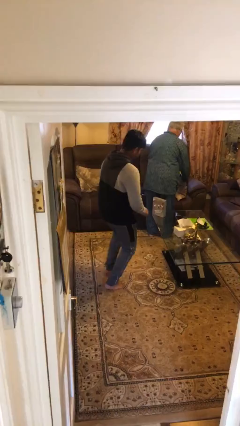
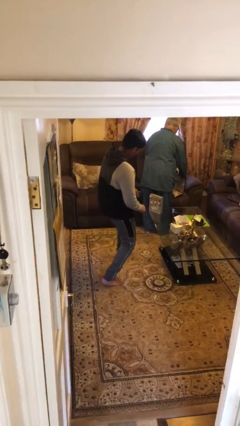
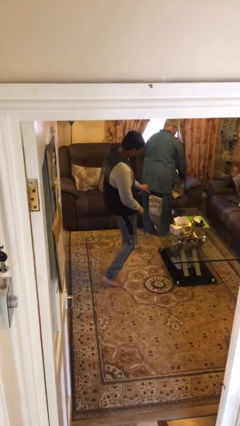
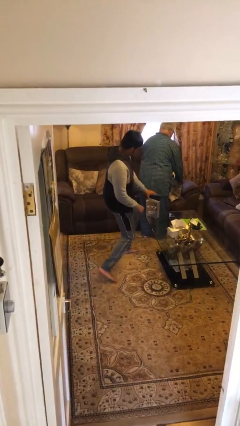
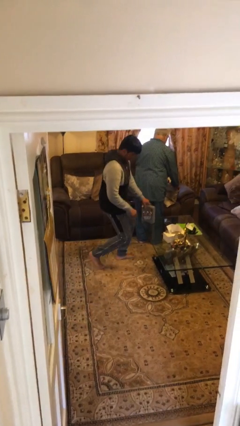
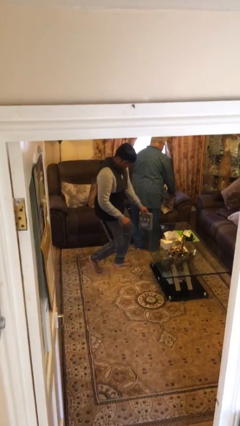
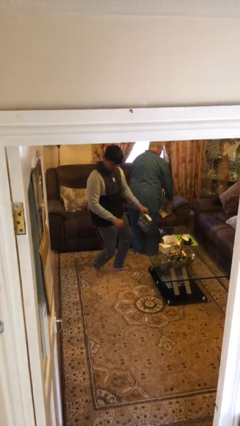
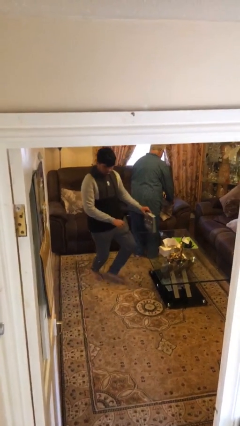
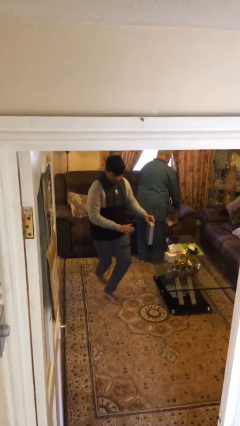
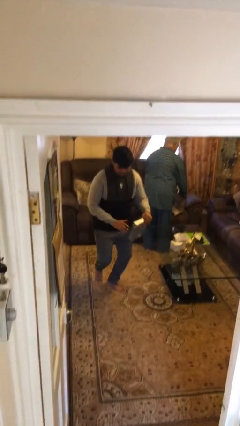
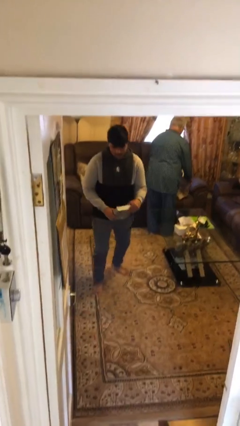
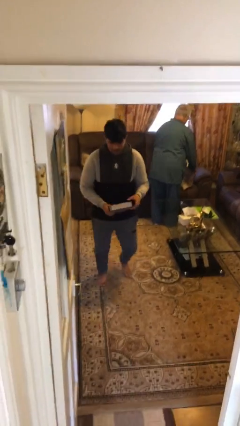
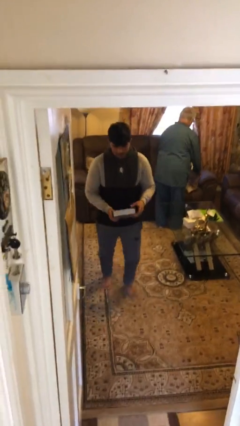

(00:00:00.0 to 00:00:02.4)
person steals object from person

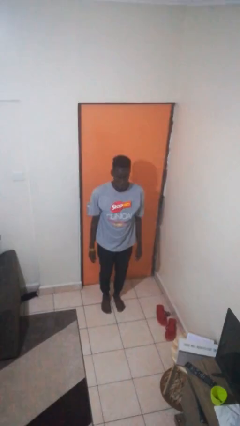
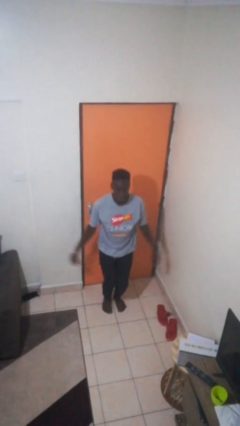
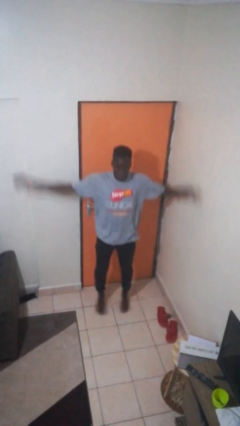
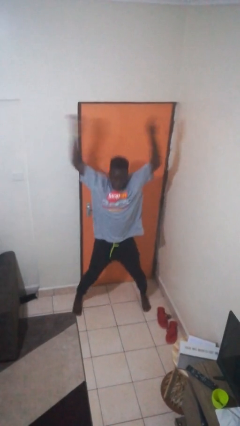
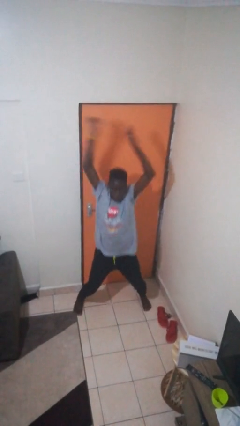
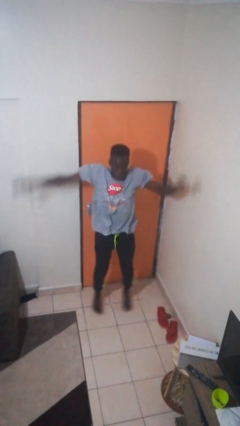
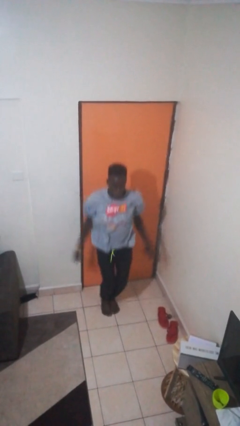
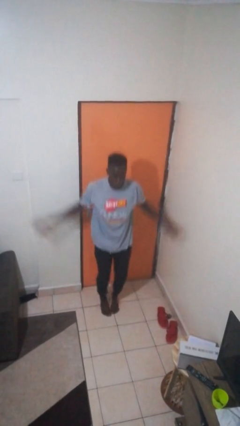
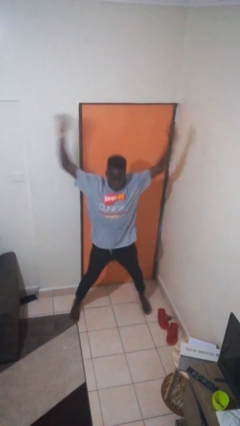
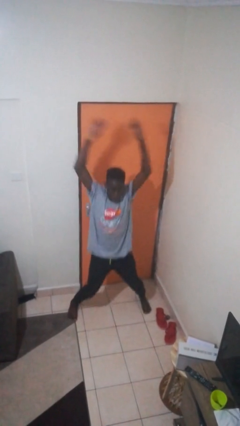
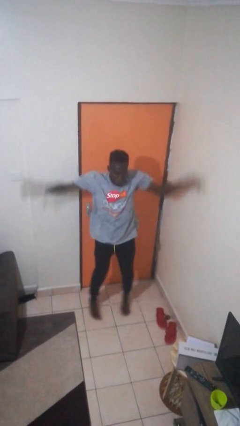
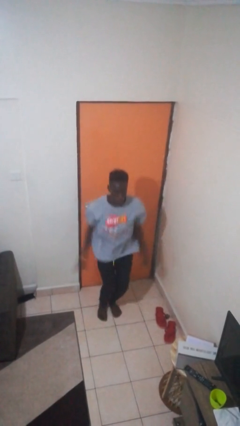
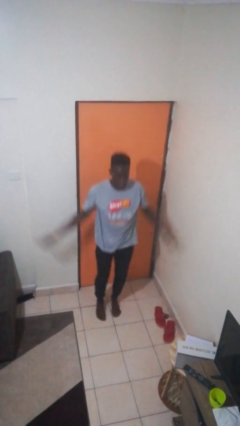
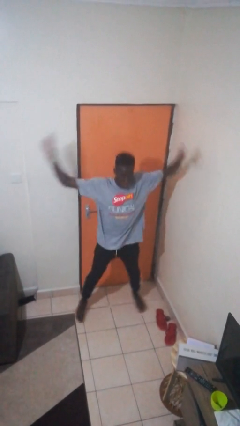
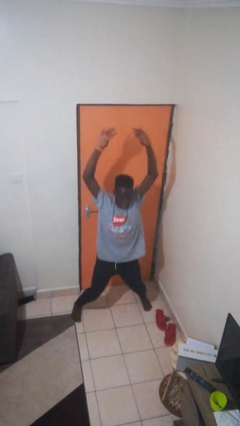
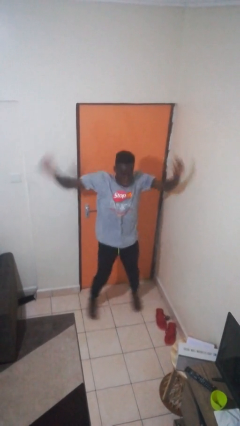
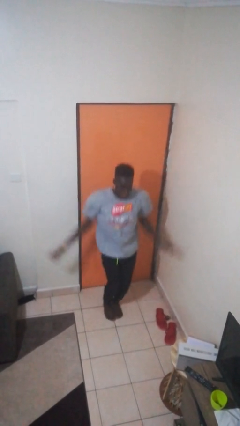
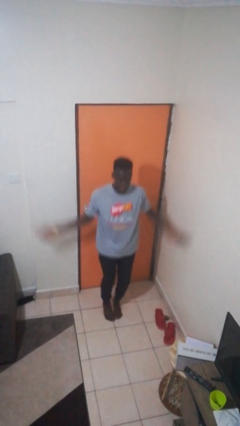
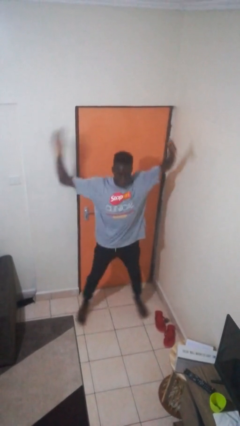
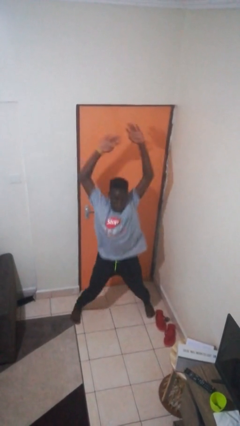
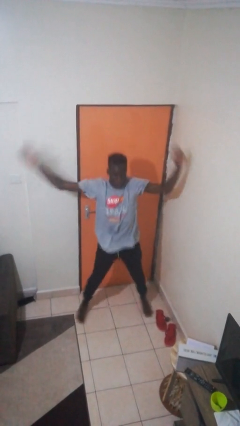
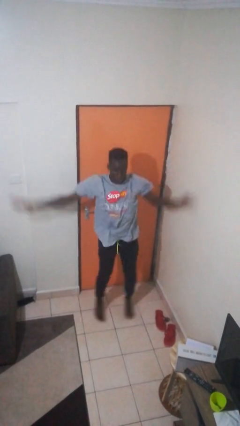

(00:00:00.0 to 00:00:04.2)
person exercises with jumping jacks

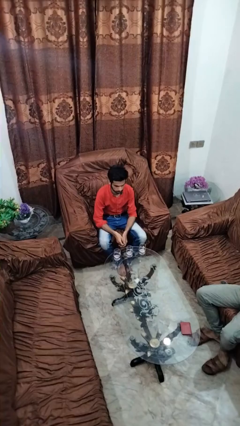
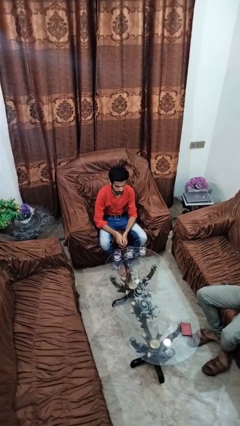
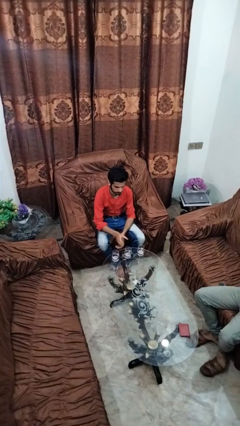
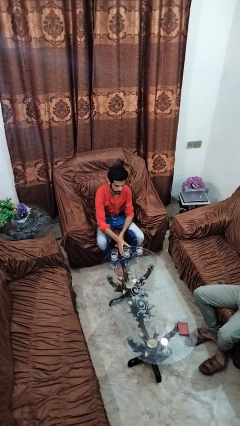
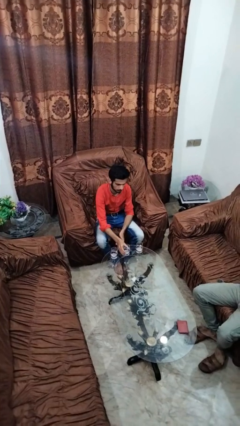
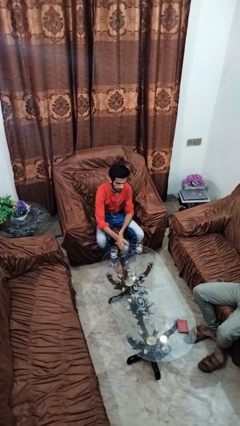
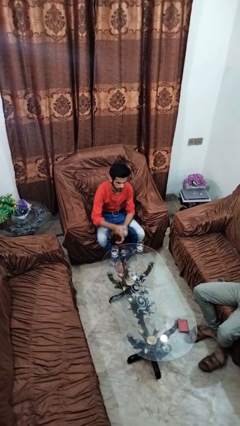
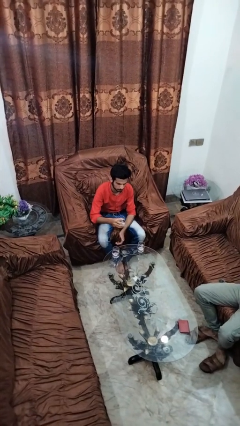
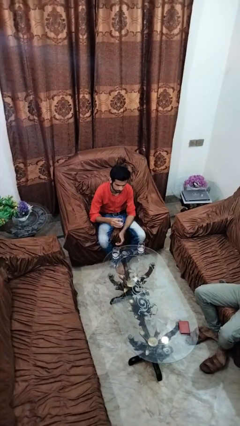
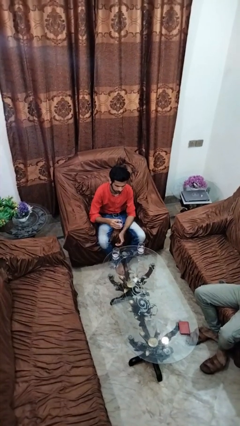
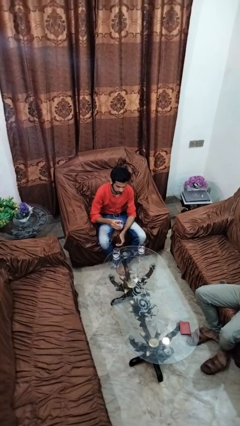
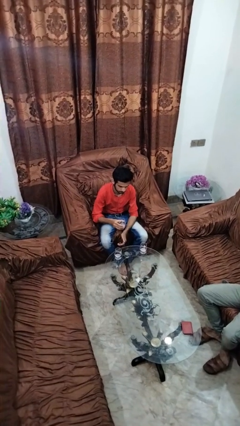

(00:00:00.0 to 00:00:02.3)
person picks up object from table

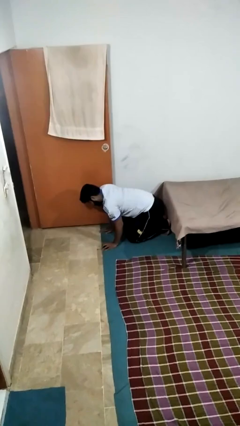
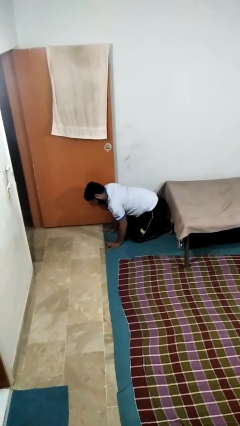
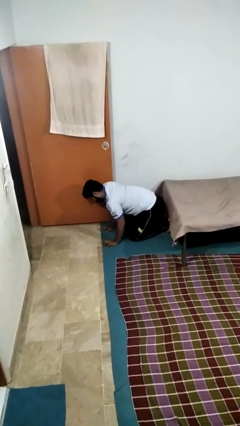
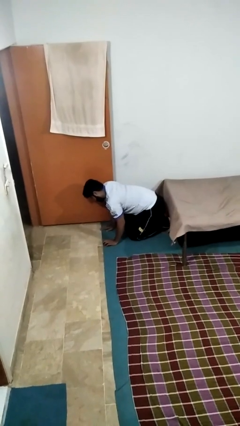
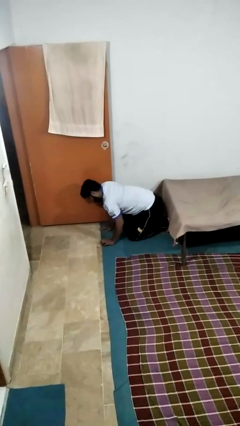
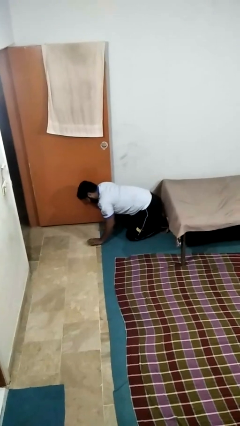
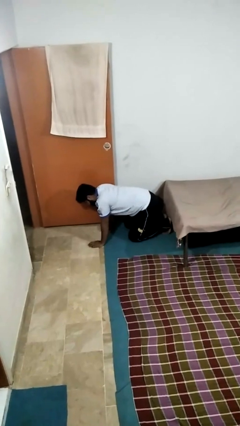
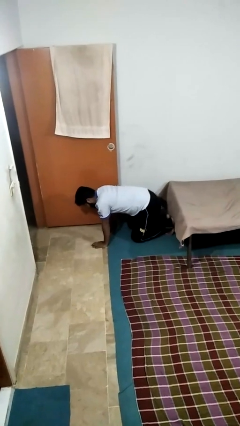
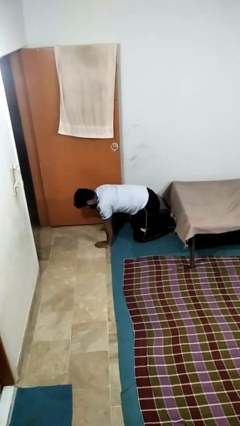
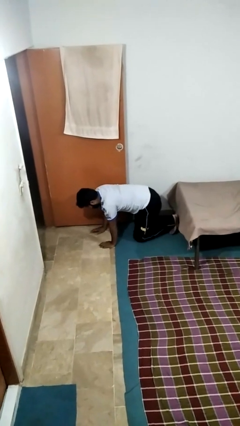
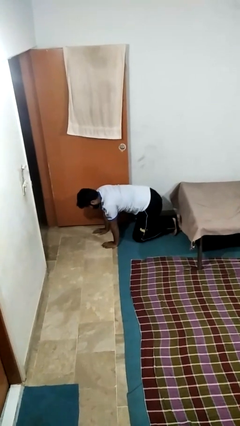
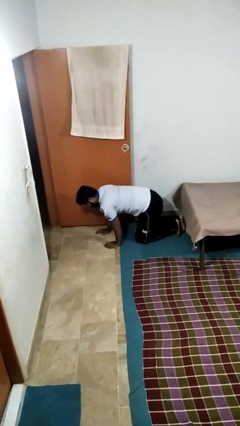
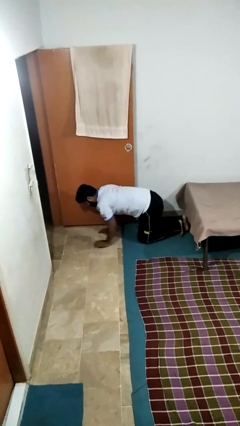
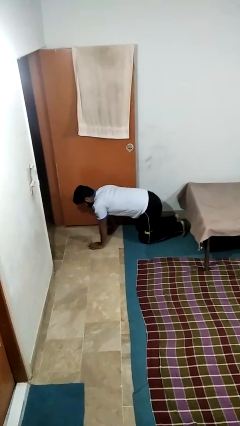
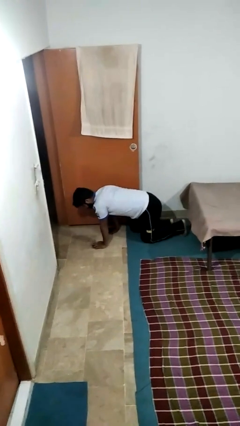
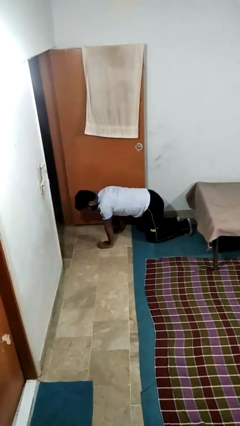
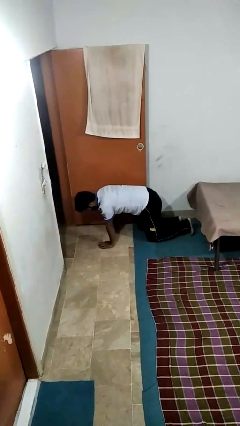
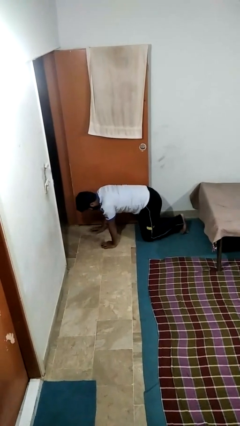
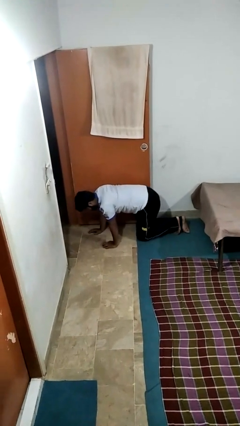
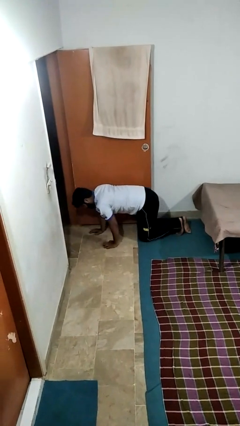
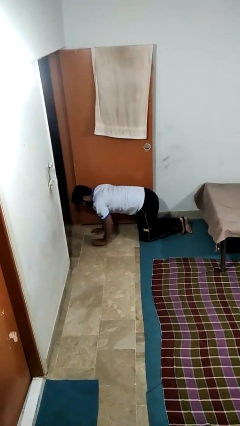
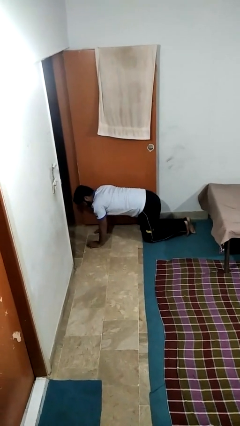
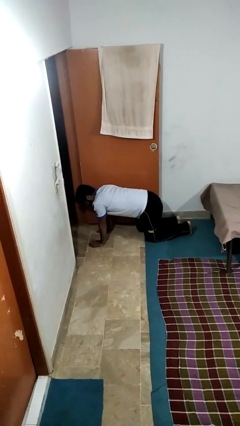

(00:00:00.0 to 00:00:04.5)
person crawls

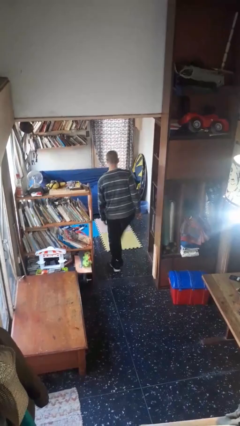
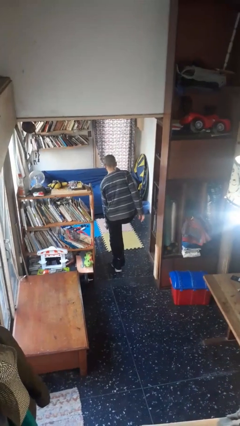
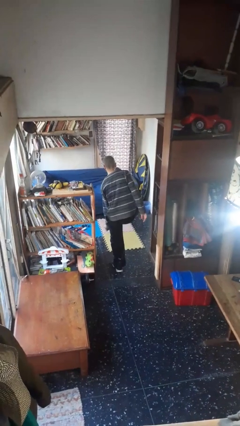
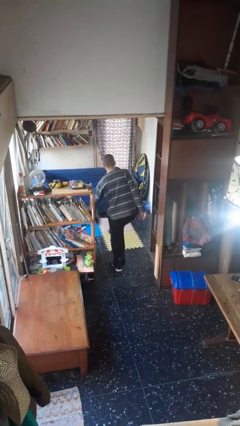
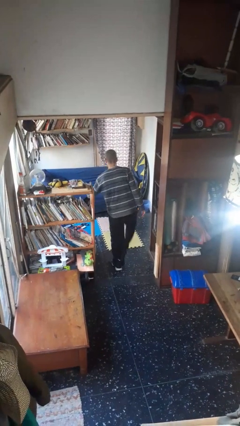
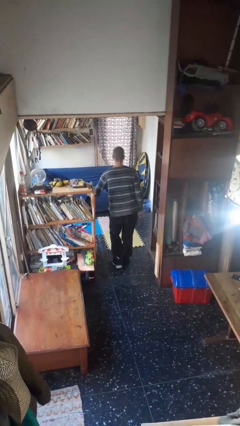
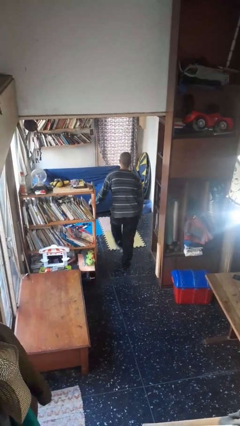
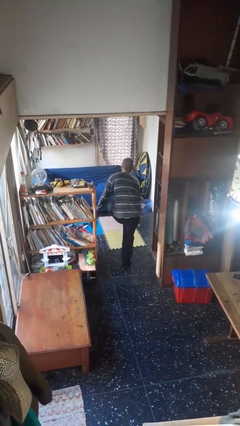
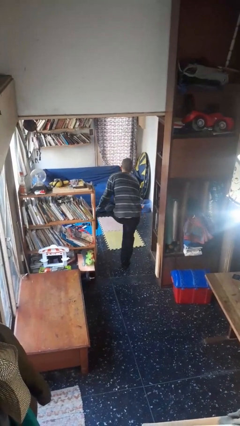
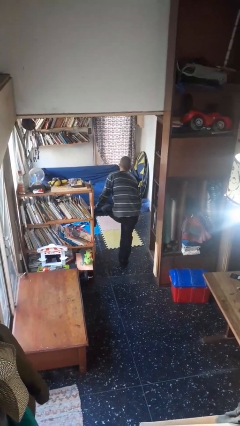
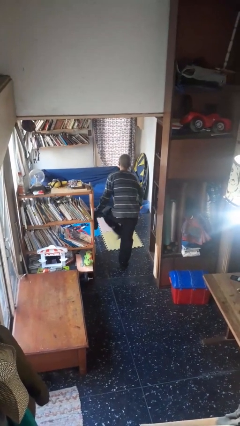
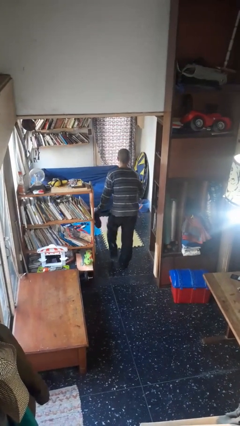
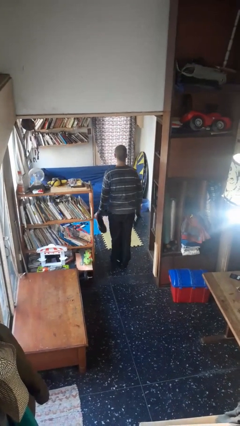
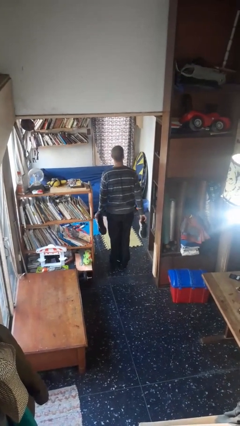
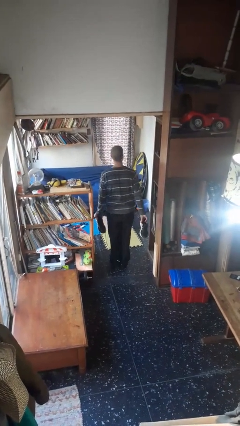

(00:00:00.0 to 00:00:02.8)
person takes off shoes

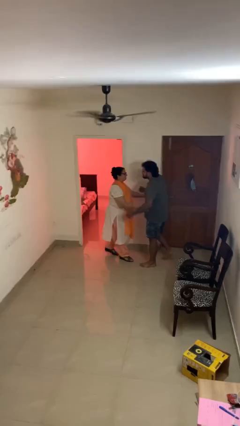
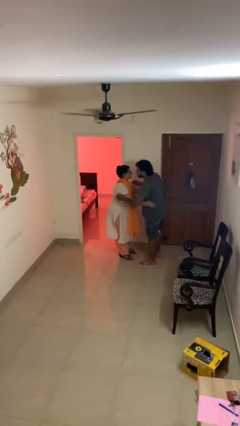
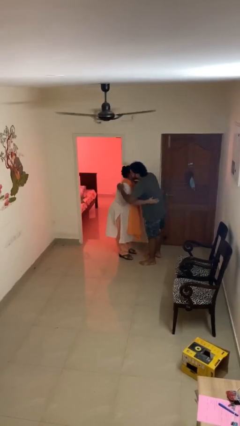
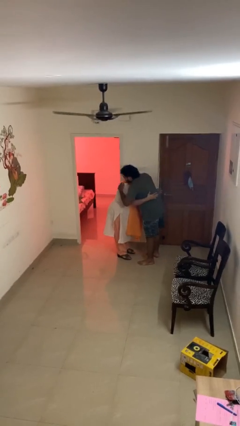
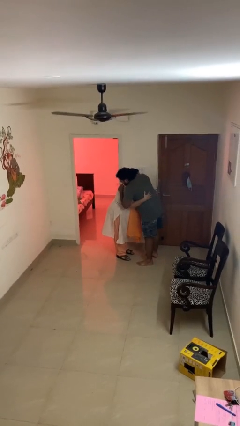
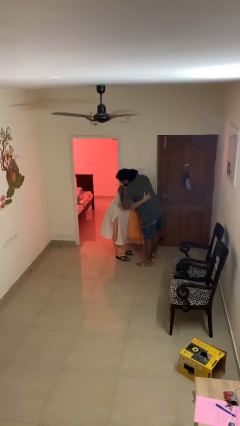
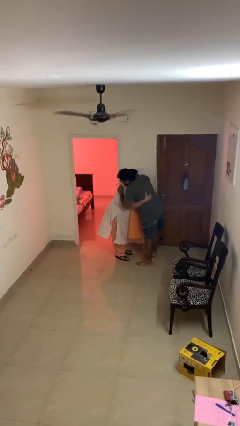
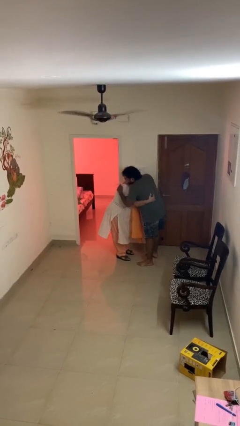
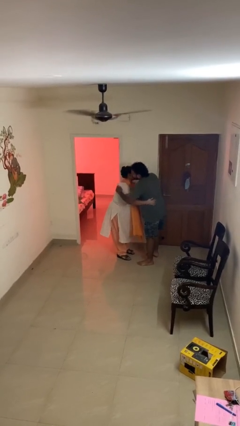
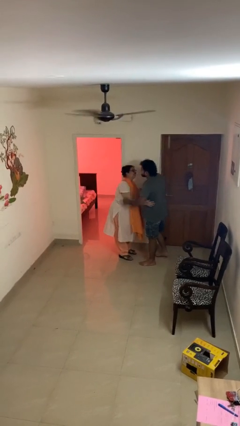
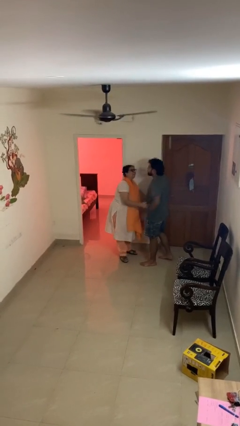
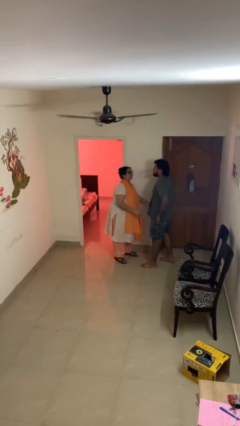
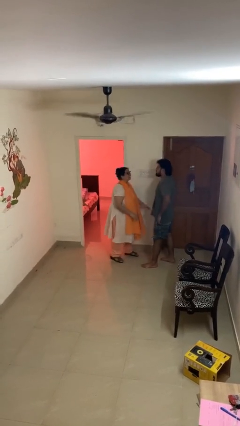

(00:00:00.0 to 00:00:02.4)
person embraces person
